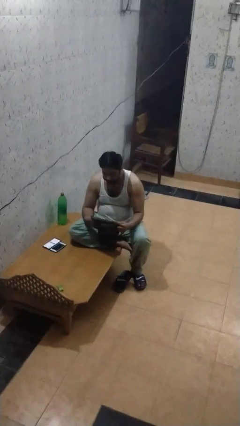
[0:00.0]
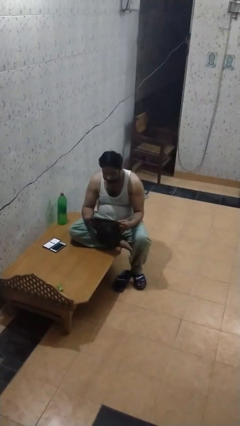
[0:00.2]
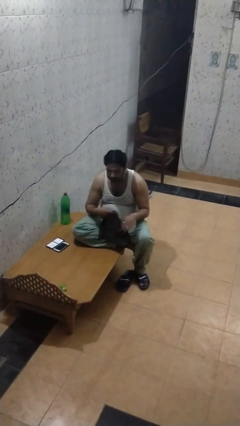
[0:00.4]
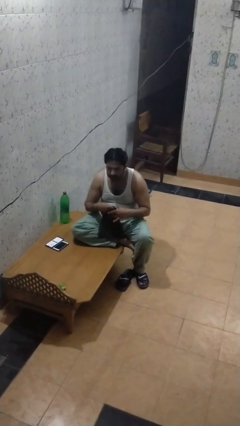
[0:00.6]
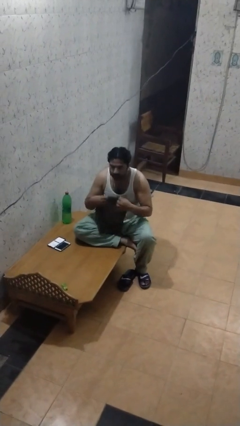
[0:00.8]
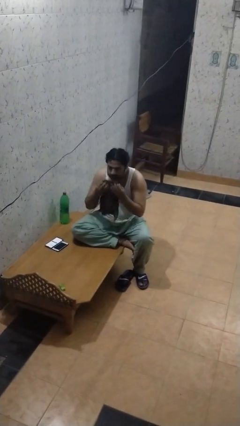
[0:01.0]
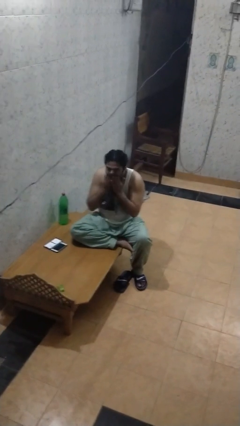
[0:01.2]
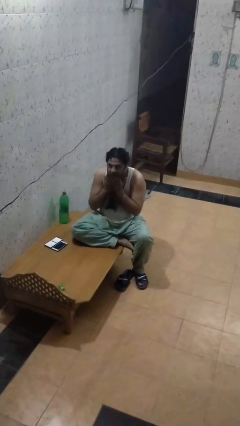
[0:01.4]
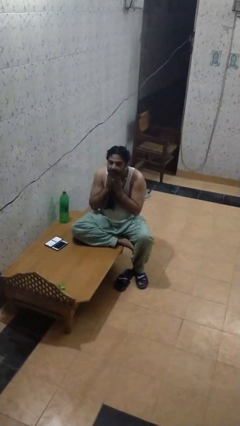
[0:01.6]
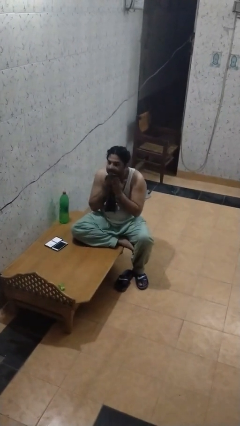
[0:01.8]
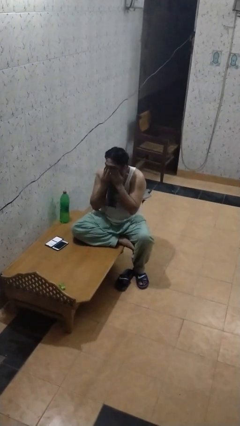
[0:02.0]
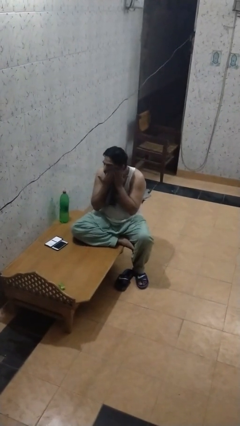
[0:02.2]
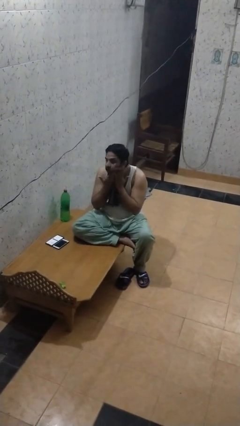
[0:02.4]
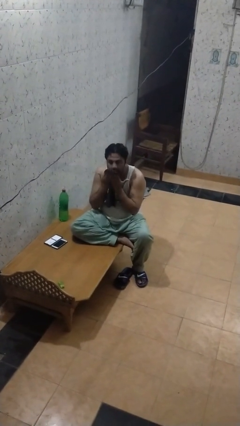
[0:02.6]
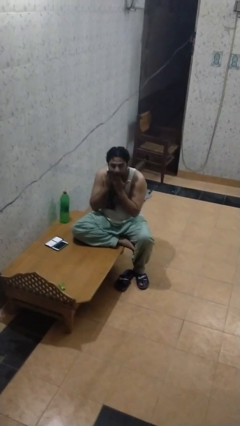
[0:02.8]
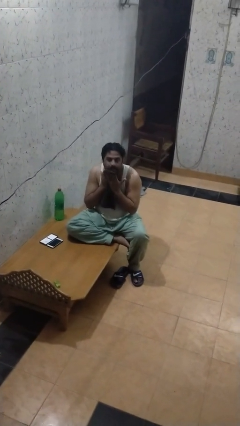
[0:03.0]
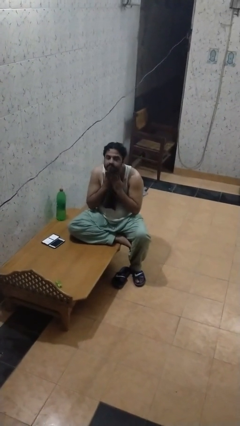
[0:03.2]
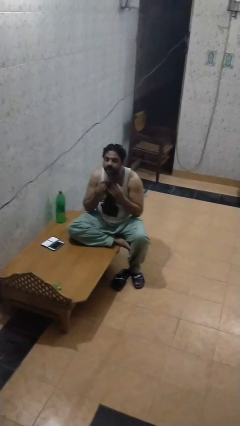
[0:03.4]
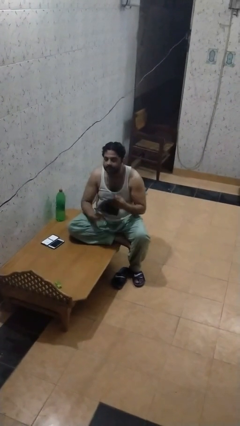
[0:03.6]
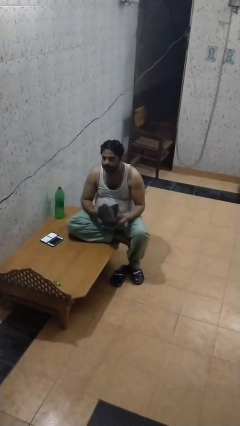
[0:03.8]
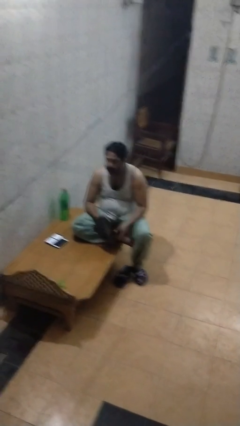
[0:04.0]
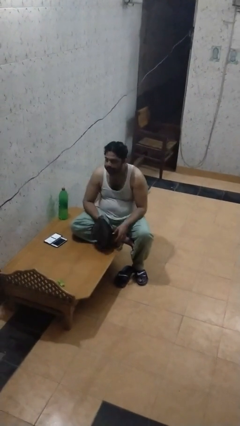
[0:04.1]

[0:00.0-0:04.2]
person wipes mouth with napkin

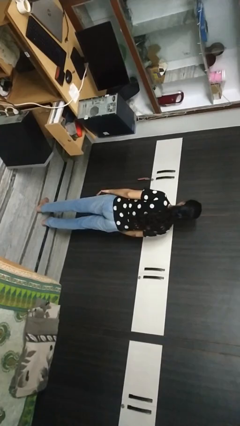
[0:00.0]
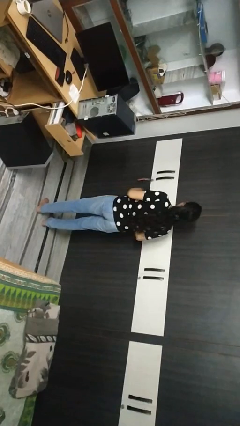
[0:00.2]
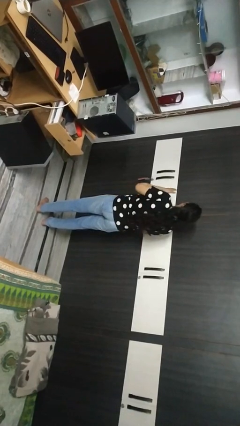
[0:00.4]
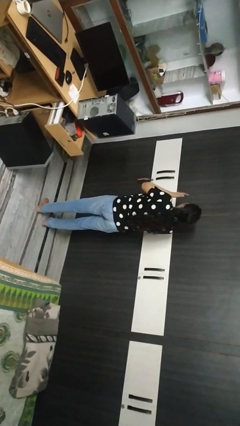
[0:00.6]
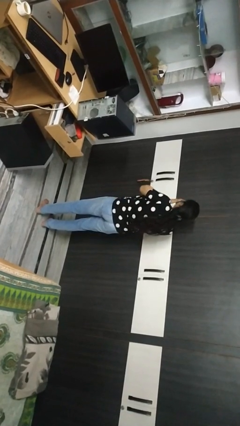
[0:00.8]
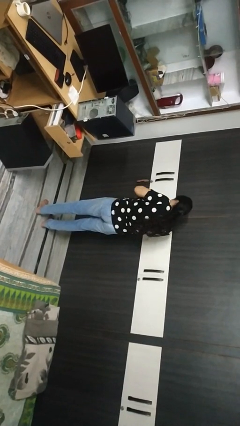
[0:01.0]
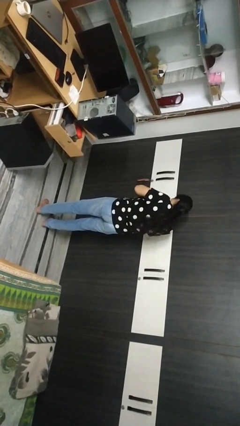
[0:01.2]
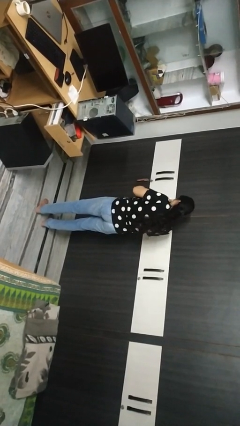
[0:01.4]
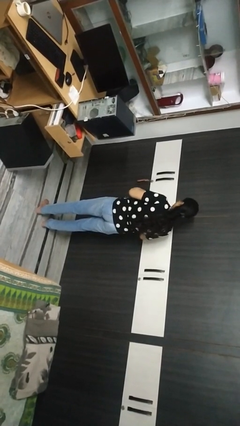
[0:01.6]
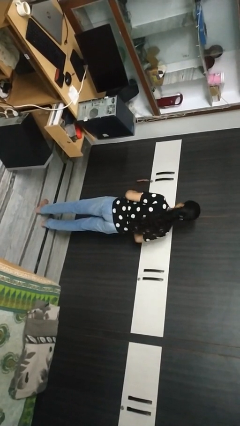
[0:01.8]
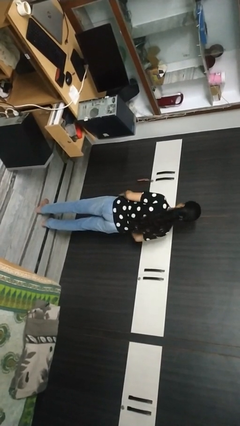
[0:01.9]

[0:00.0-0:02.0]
person sneezes into hand

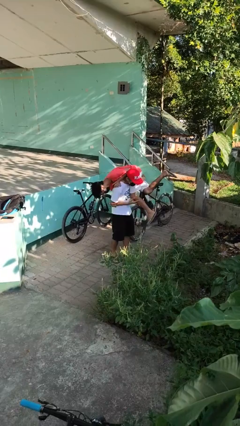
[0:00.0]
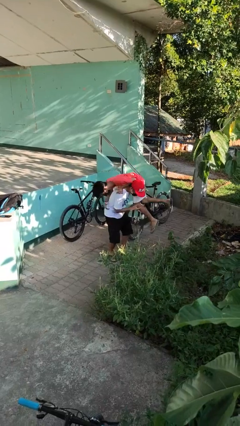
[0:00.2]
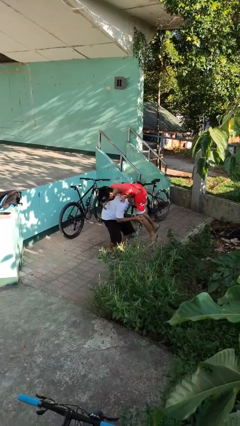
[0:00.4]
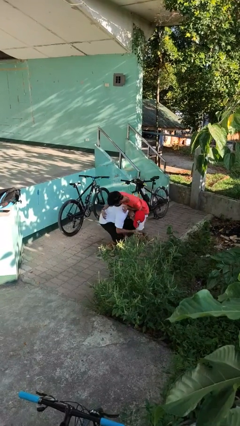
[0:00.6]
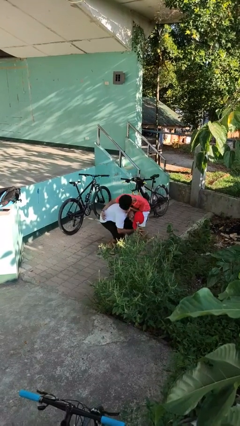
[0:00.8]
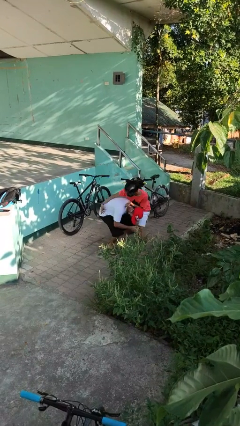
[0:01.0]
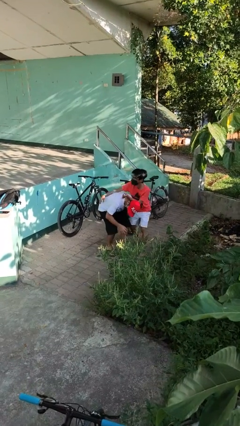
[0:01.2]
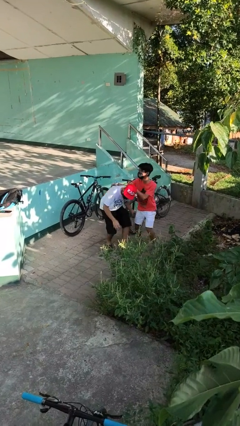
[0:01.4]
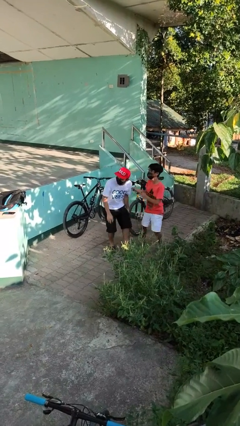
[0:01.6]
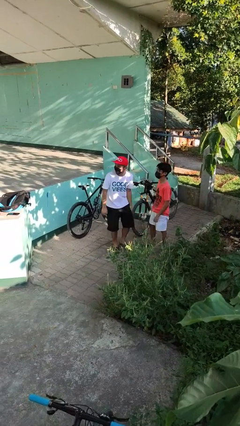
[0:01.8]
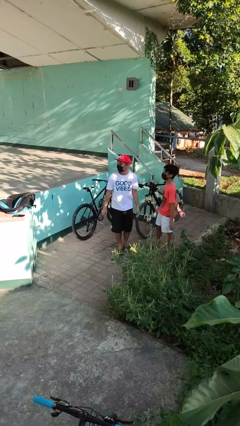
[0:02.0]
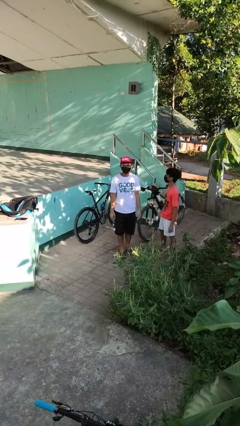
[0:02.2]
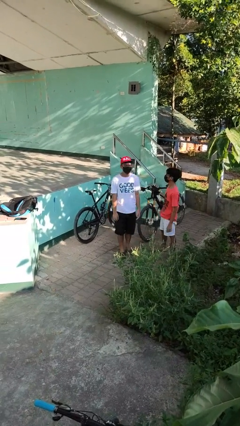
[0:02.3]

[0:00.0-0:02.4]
person puts down person

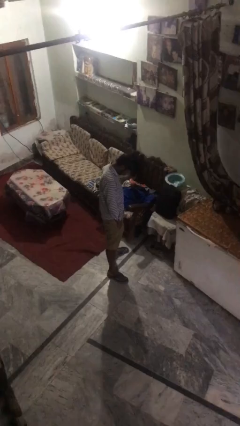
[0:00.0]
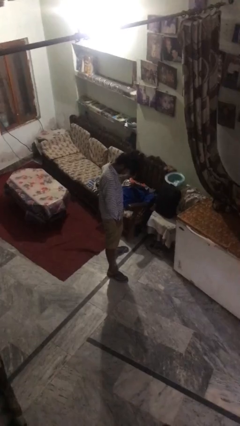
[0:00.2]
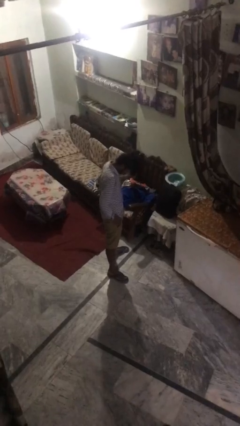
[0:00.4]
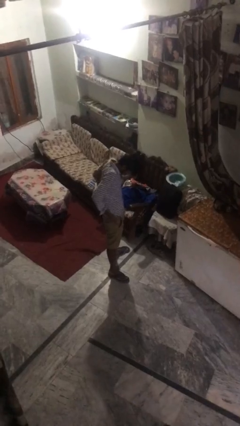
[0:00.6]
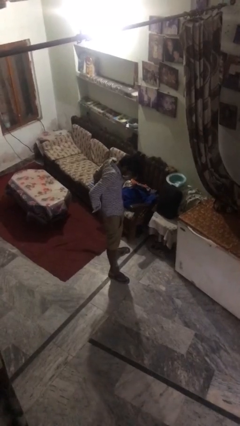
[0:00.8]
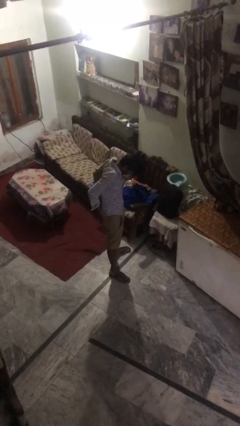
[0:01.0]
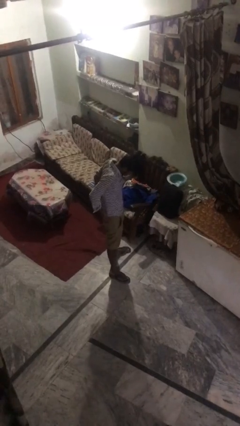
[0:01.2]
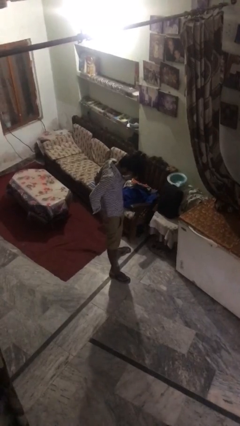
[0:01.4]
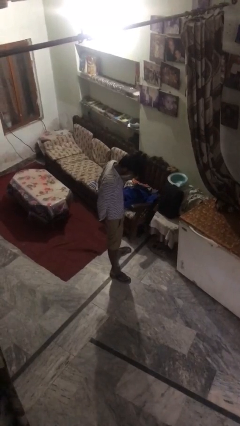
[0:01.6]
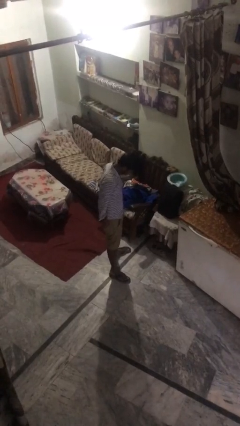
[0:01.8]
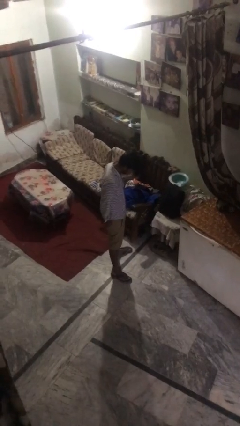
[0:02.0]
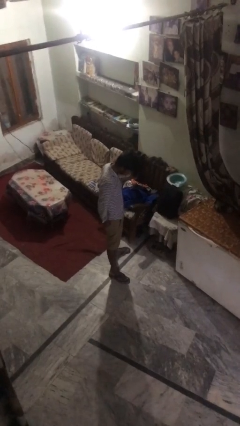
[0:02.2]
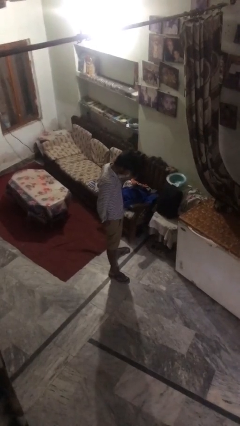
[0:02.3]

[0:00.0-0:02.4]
person puts hands in back pockets

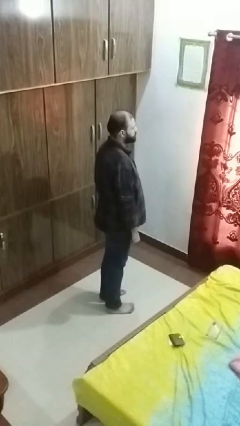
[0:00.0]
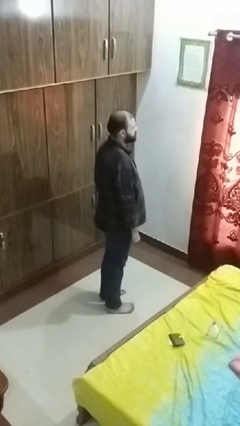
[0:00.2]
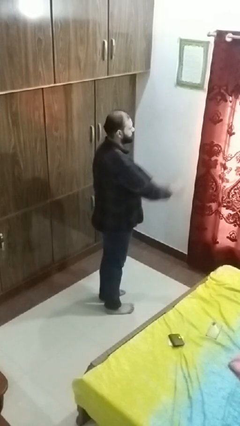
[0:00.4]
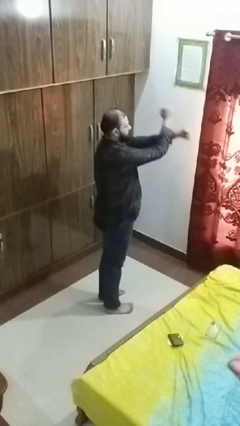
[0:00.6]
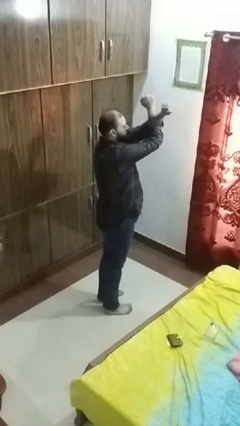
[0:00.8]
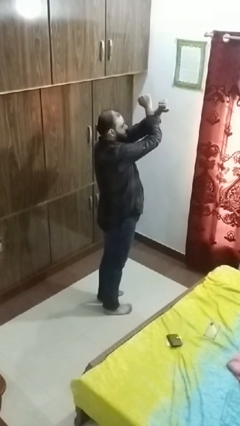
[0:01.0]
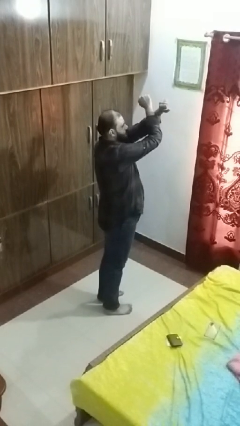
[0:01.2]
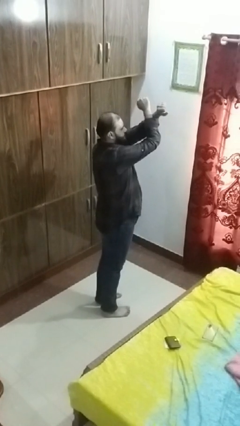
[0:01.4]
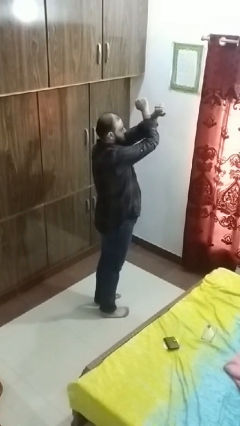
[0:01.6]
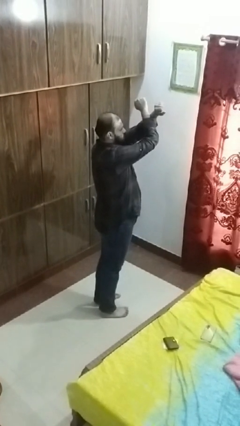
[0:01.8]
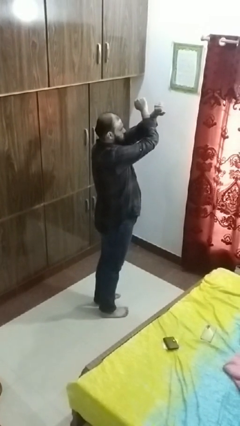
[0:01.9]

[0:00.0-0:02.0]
person gestures arms x

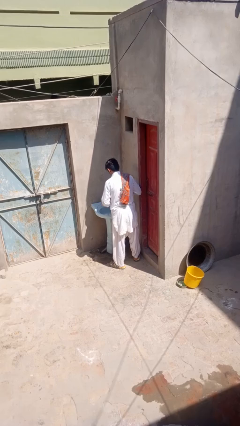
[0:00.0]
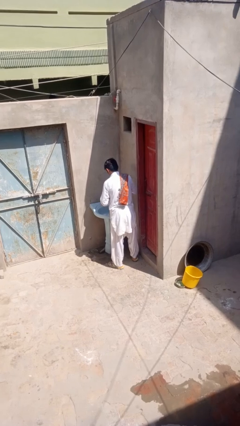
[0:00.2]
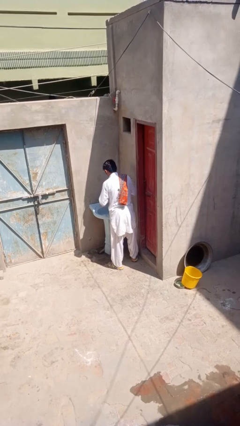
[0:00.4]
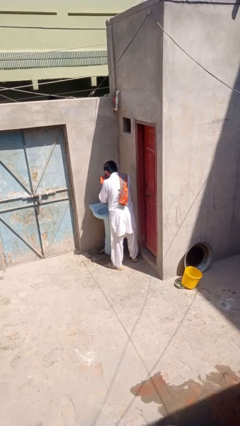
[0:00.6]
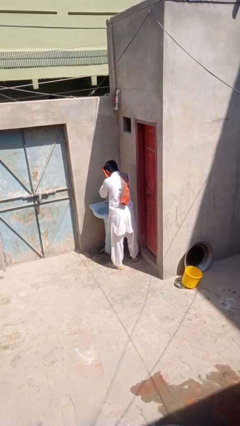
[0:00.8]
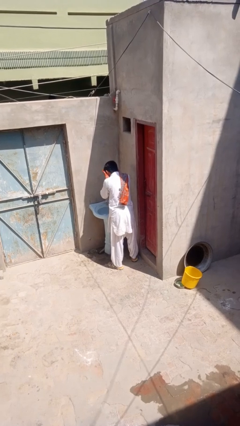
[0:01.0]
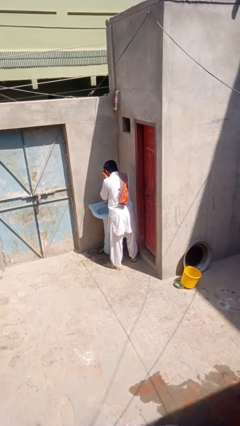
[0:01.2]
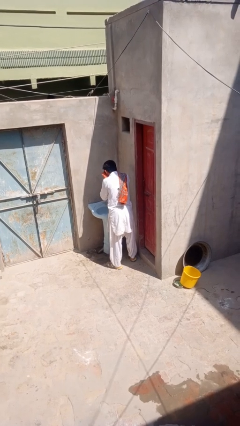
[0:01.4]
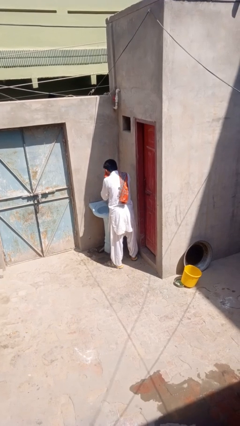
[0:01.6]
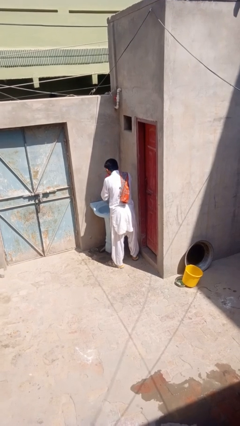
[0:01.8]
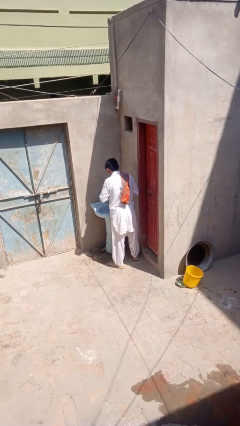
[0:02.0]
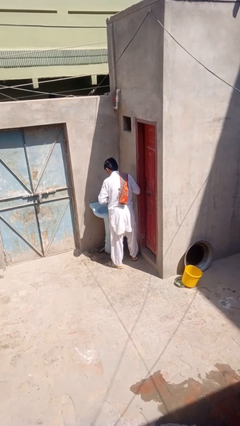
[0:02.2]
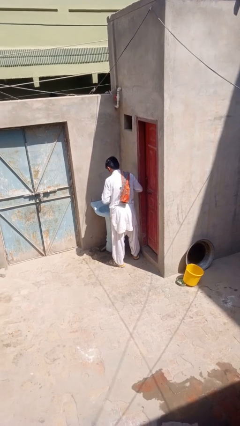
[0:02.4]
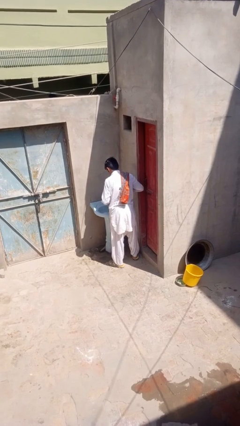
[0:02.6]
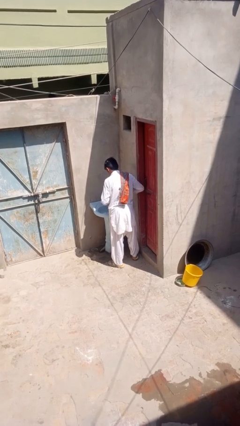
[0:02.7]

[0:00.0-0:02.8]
person dries face with towel

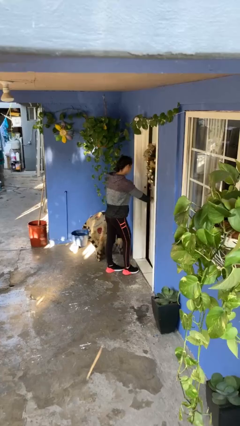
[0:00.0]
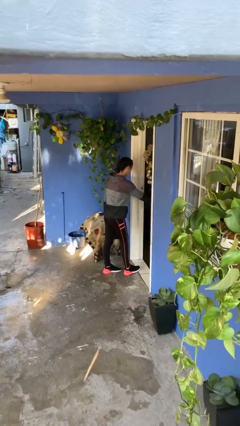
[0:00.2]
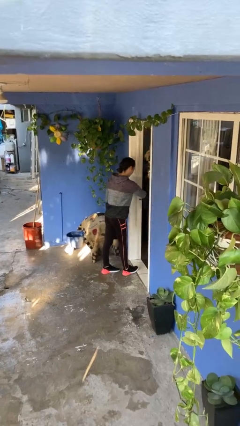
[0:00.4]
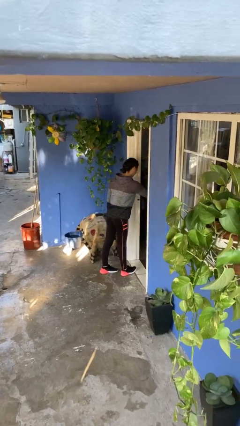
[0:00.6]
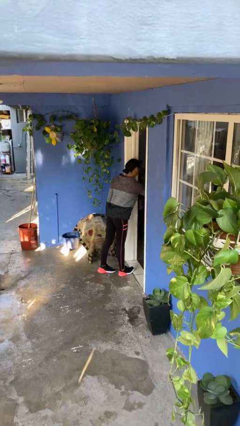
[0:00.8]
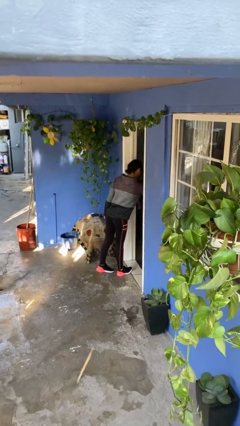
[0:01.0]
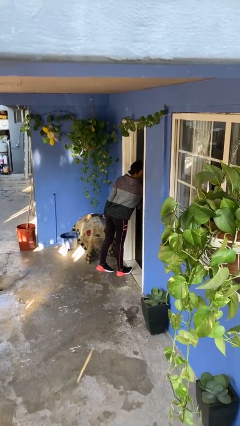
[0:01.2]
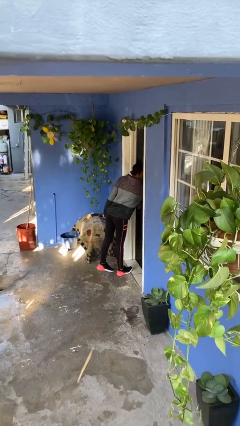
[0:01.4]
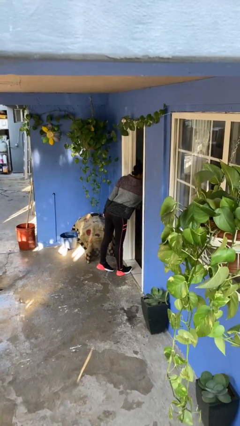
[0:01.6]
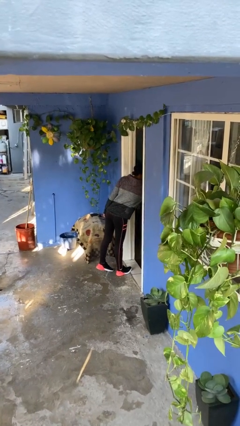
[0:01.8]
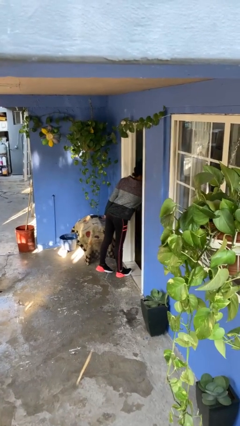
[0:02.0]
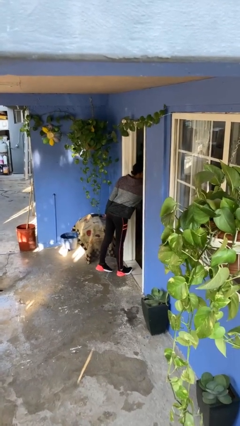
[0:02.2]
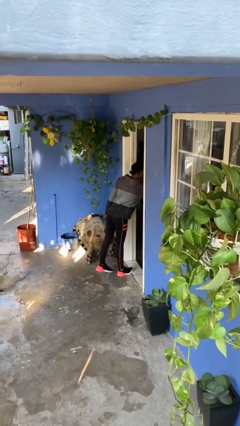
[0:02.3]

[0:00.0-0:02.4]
person opens facility door
